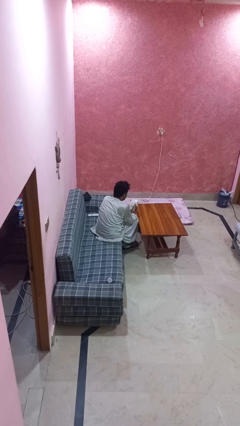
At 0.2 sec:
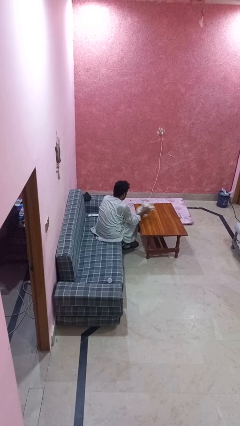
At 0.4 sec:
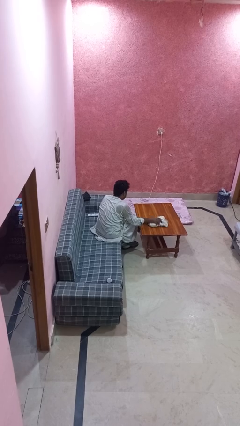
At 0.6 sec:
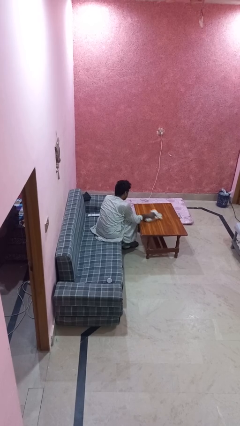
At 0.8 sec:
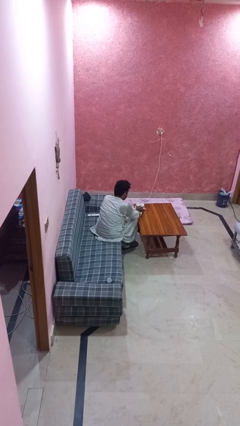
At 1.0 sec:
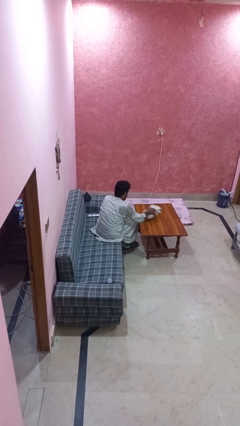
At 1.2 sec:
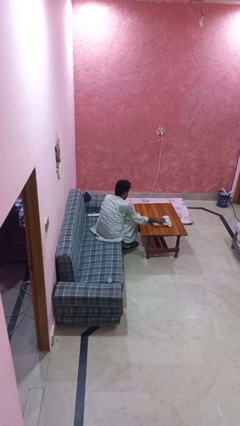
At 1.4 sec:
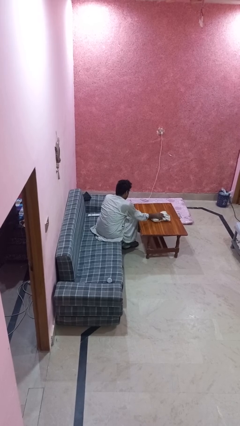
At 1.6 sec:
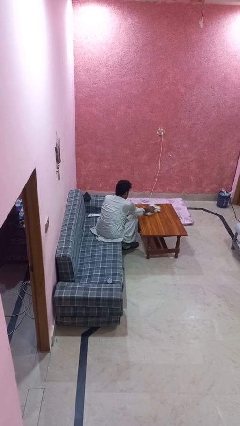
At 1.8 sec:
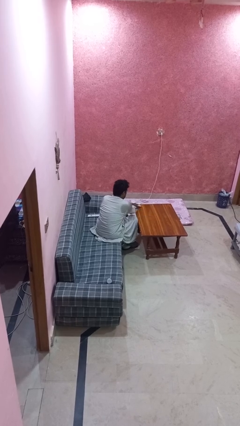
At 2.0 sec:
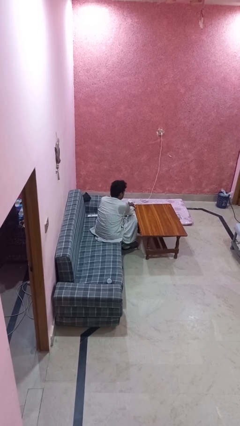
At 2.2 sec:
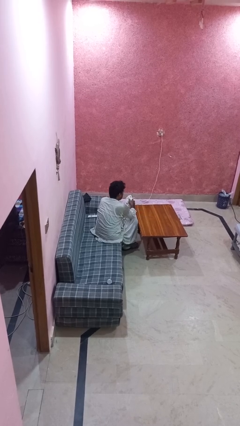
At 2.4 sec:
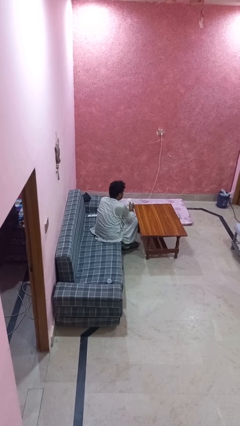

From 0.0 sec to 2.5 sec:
person cleans table with rag

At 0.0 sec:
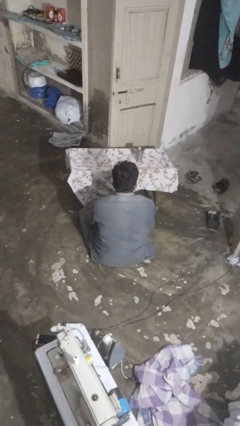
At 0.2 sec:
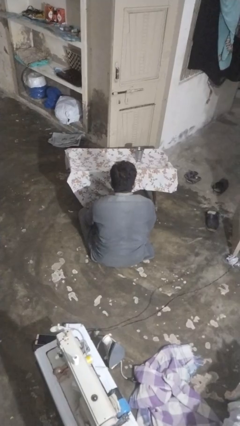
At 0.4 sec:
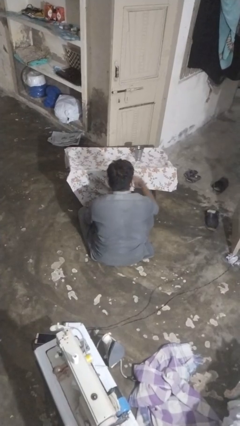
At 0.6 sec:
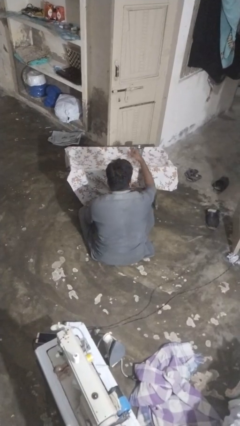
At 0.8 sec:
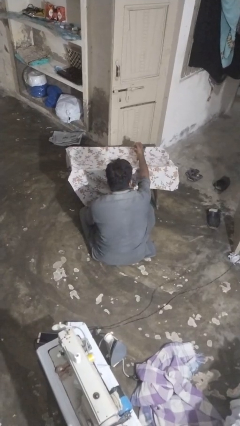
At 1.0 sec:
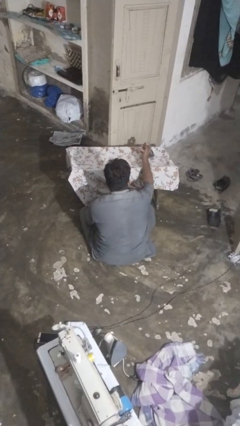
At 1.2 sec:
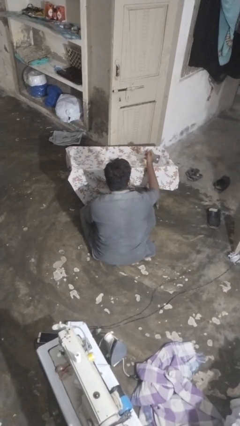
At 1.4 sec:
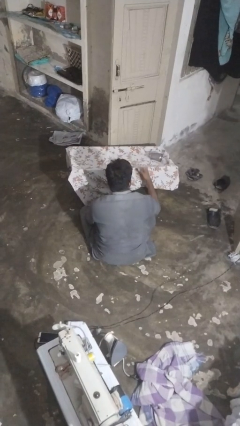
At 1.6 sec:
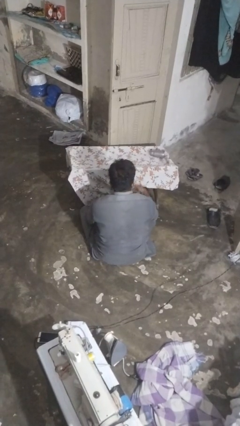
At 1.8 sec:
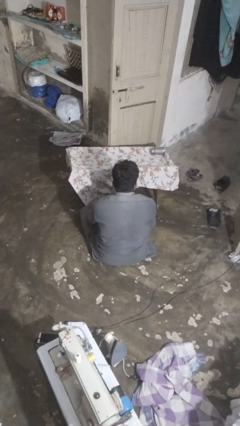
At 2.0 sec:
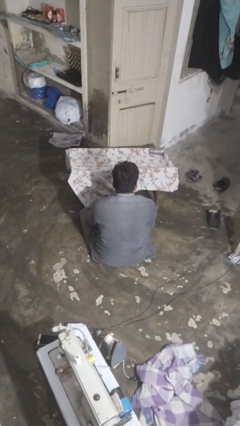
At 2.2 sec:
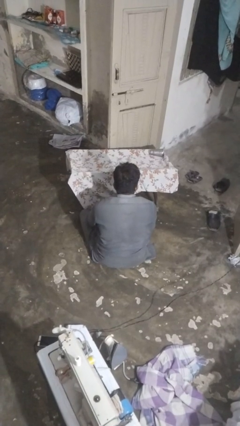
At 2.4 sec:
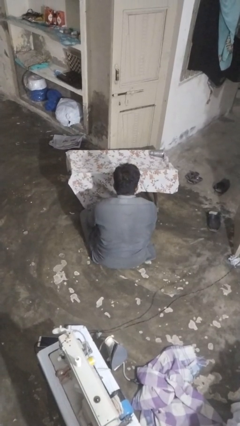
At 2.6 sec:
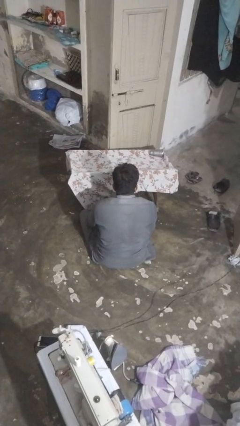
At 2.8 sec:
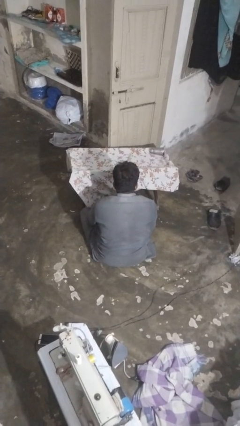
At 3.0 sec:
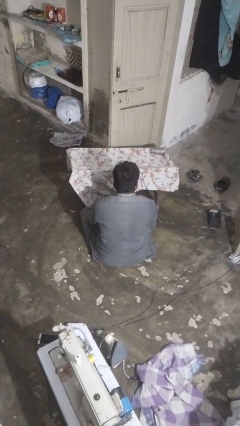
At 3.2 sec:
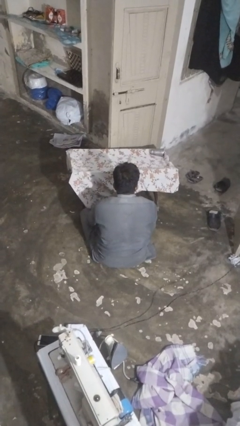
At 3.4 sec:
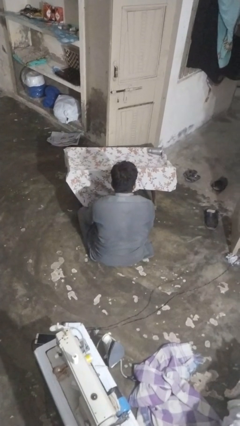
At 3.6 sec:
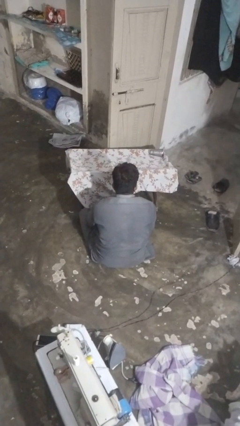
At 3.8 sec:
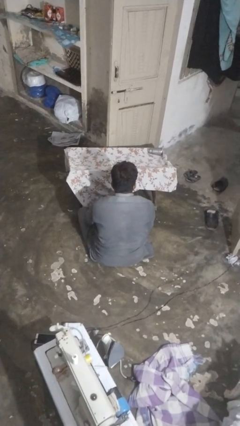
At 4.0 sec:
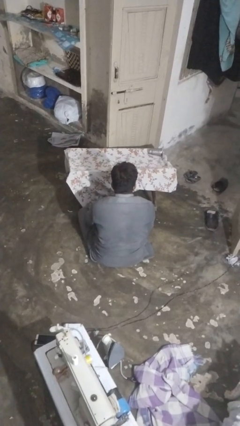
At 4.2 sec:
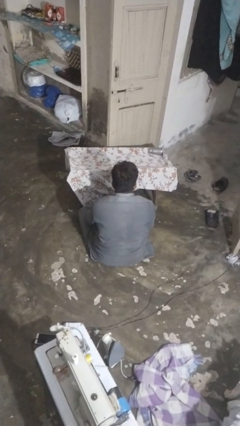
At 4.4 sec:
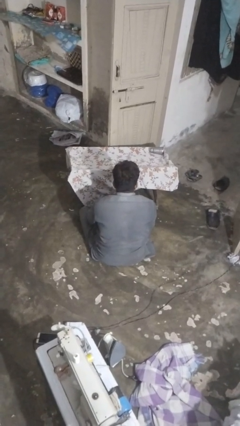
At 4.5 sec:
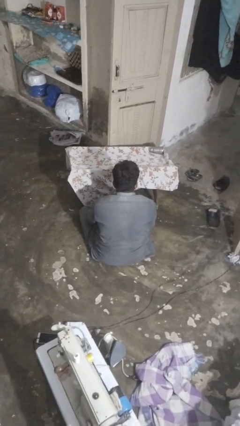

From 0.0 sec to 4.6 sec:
person knocks over glass

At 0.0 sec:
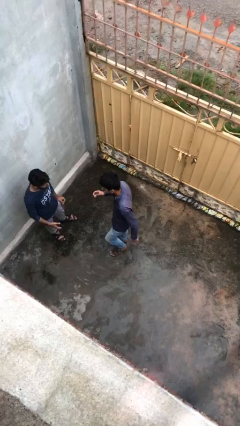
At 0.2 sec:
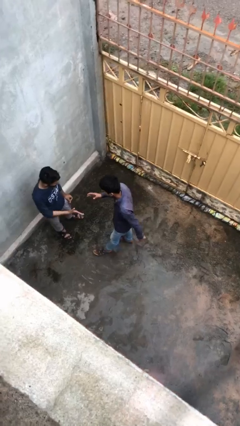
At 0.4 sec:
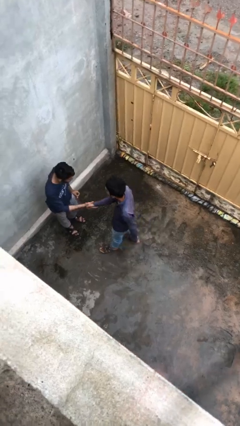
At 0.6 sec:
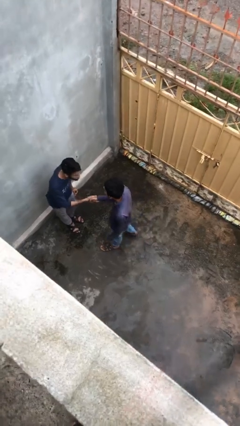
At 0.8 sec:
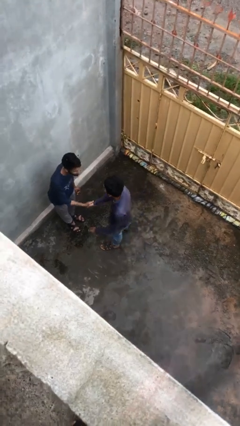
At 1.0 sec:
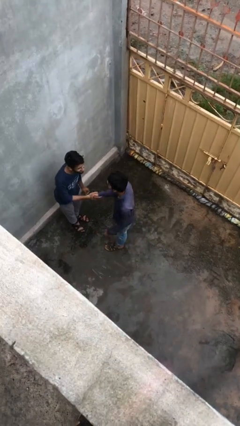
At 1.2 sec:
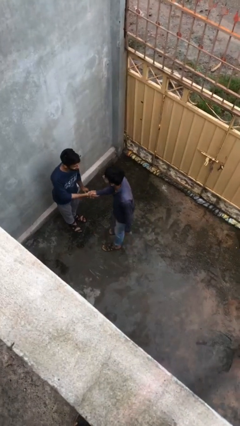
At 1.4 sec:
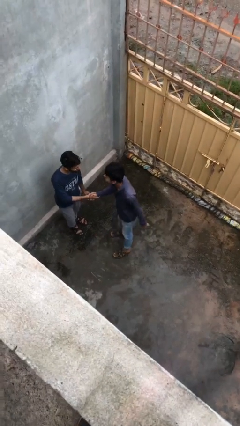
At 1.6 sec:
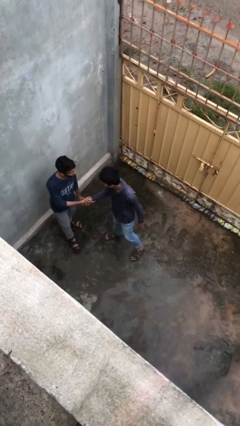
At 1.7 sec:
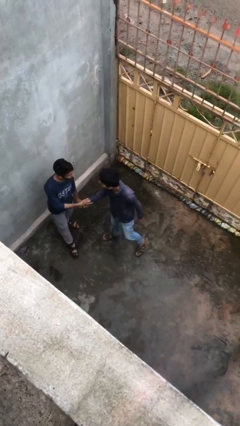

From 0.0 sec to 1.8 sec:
person shakes hand

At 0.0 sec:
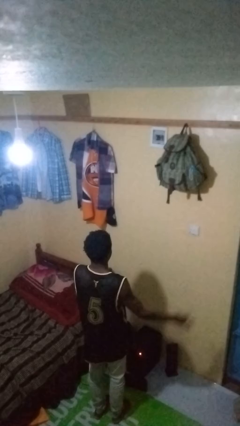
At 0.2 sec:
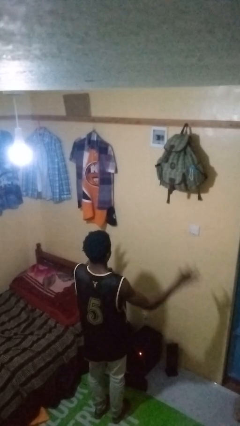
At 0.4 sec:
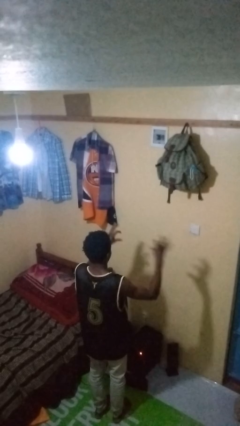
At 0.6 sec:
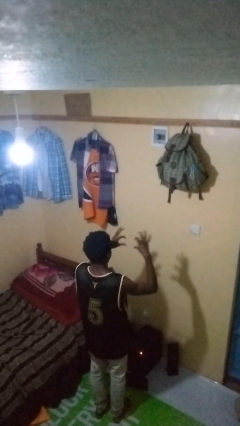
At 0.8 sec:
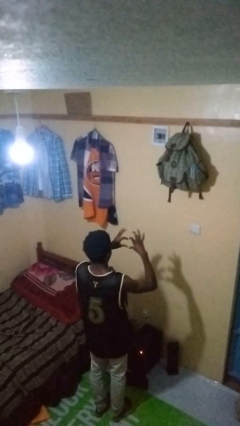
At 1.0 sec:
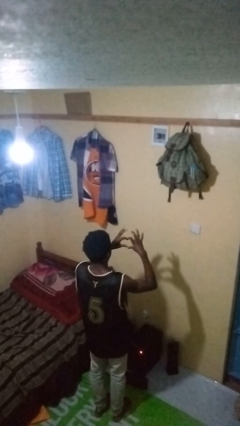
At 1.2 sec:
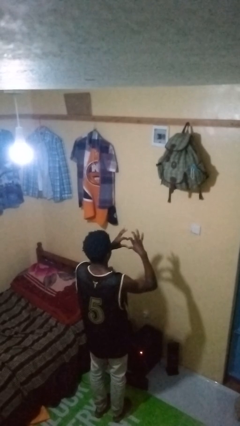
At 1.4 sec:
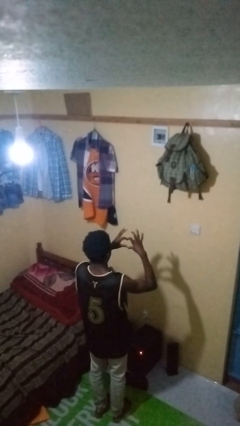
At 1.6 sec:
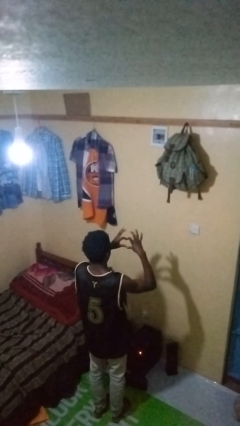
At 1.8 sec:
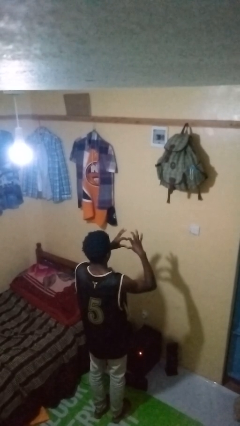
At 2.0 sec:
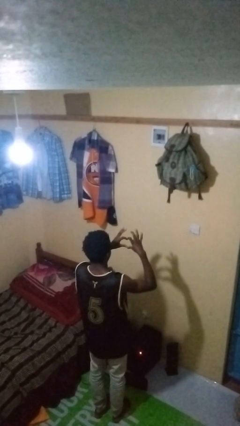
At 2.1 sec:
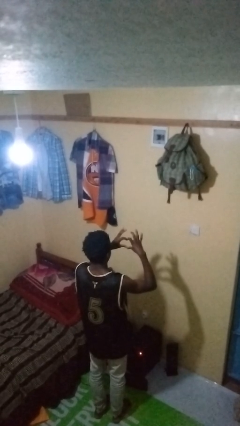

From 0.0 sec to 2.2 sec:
person gestures heart

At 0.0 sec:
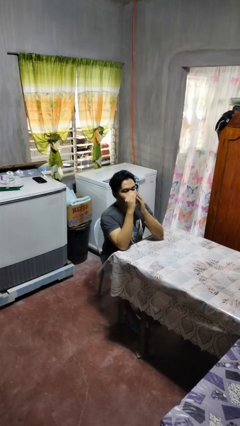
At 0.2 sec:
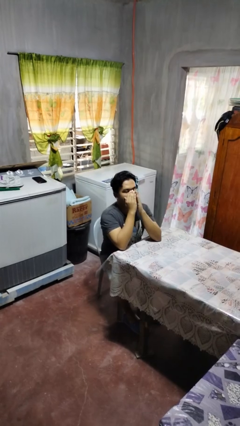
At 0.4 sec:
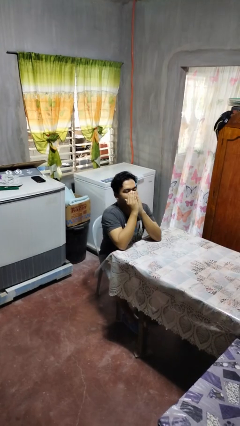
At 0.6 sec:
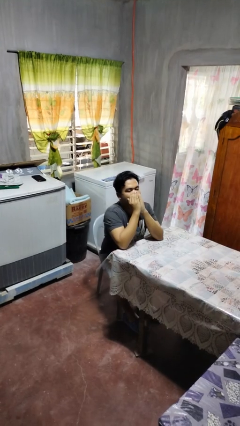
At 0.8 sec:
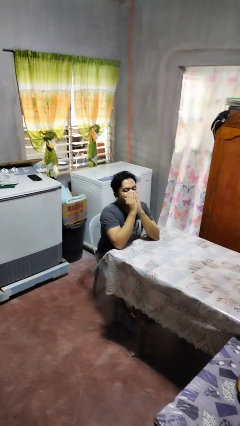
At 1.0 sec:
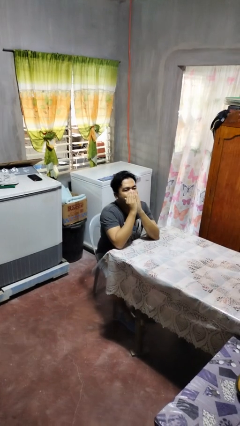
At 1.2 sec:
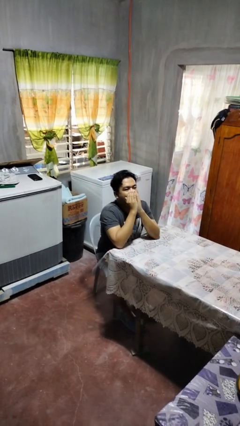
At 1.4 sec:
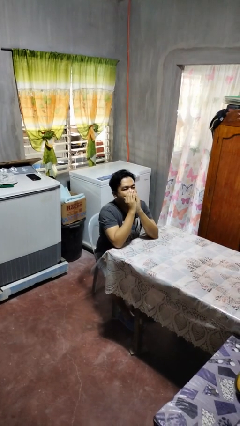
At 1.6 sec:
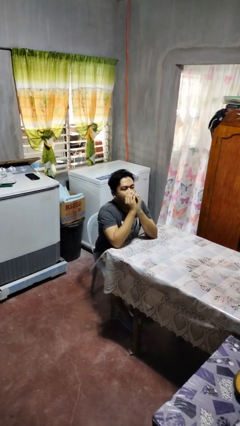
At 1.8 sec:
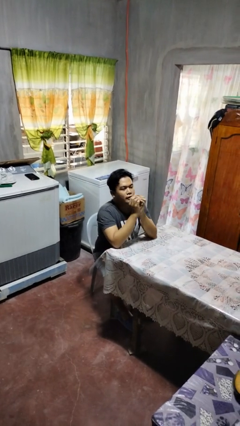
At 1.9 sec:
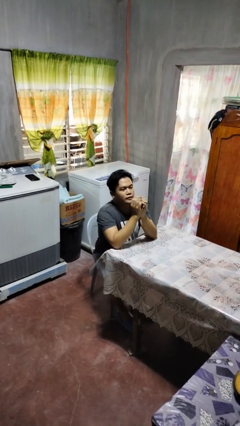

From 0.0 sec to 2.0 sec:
person yawns

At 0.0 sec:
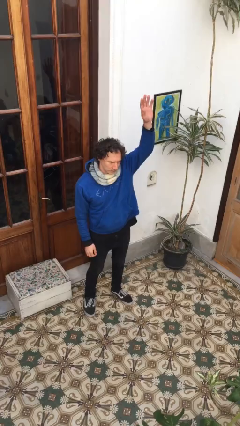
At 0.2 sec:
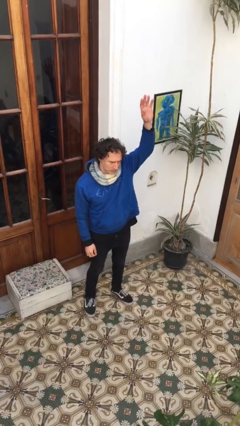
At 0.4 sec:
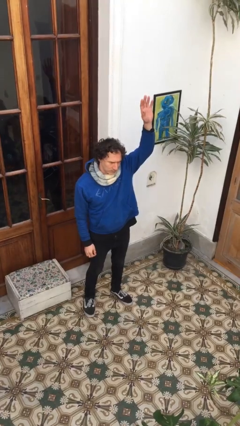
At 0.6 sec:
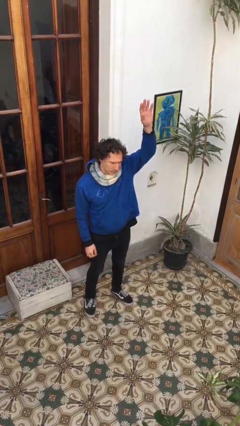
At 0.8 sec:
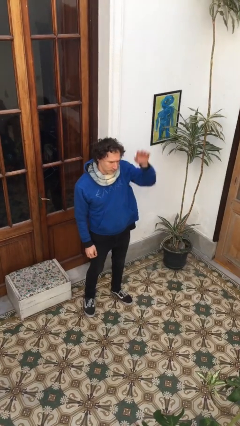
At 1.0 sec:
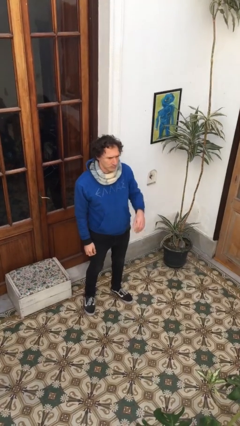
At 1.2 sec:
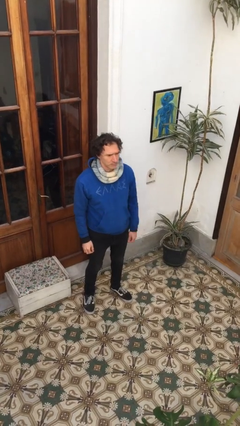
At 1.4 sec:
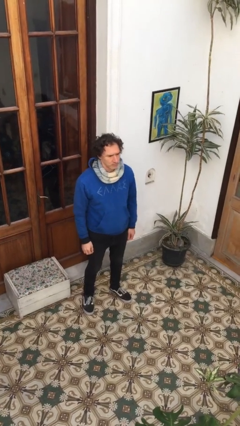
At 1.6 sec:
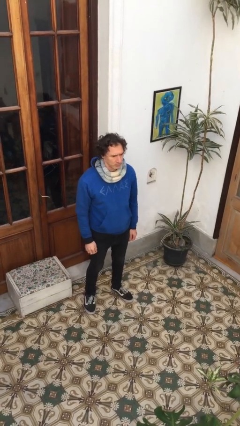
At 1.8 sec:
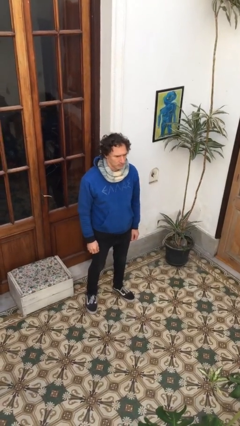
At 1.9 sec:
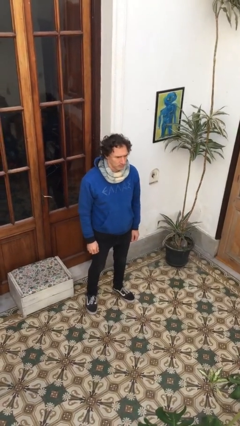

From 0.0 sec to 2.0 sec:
person gestures lower hand

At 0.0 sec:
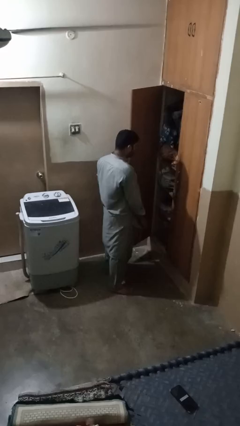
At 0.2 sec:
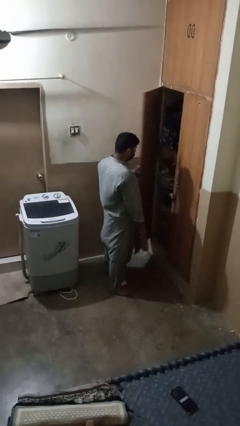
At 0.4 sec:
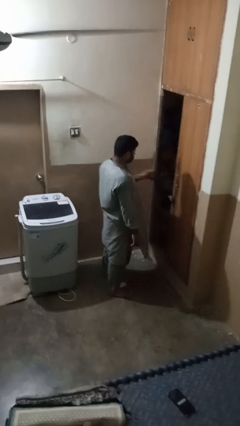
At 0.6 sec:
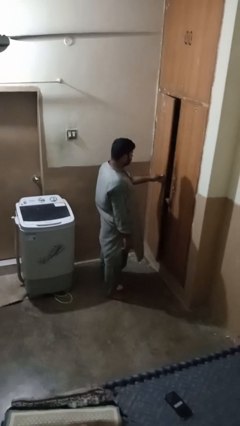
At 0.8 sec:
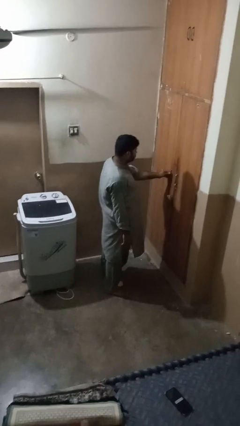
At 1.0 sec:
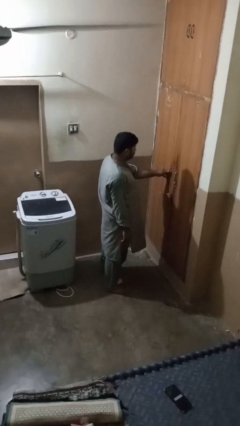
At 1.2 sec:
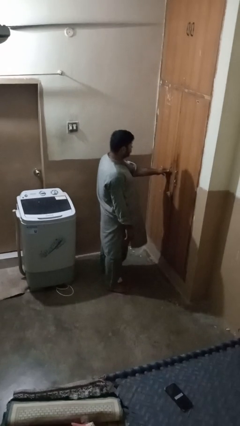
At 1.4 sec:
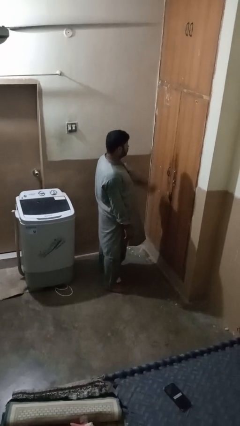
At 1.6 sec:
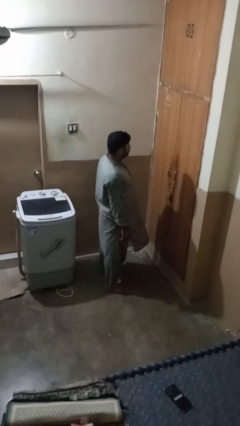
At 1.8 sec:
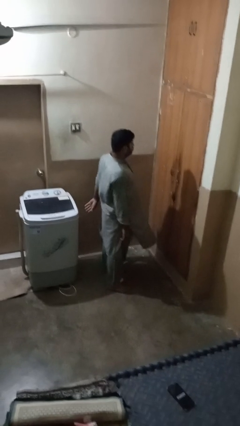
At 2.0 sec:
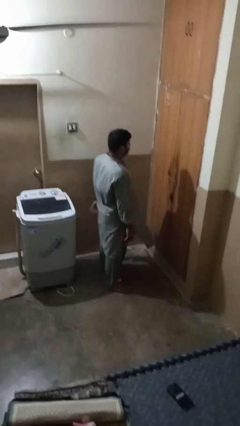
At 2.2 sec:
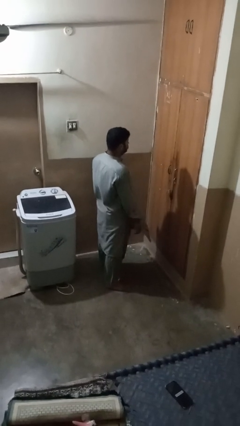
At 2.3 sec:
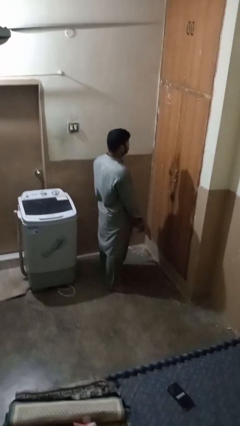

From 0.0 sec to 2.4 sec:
person closes closet door
